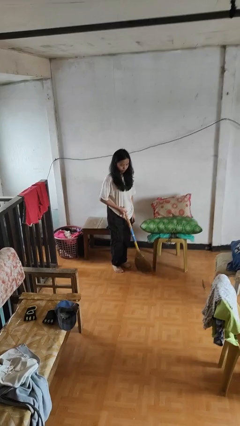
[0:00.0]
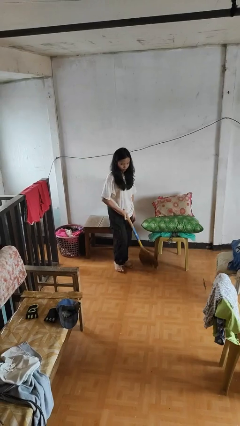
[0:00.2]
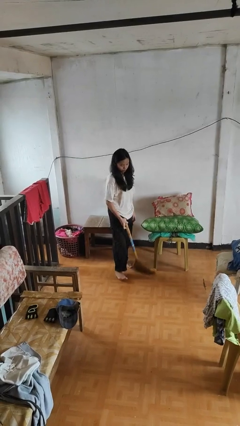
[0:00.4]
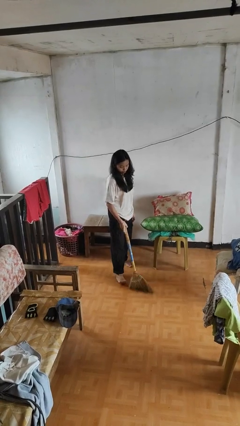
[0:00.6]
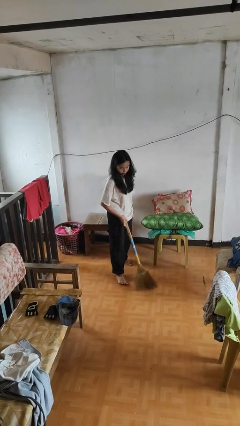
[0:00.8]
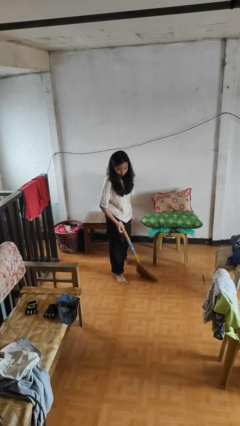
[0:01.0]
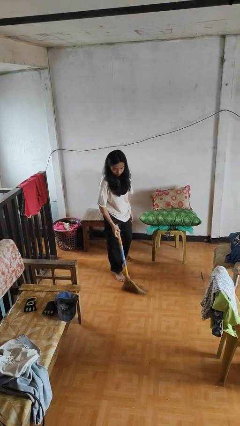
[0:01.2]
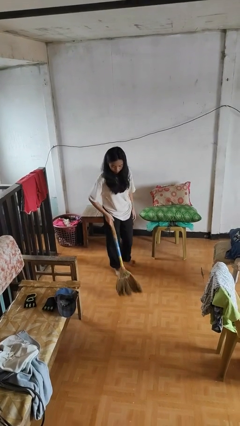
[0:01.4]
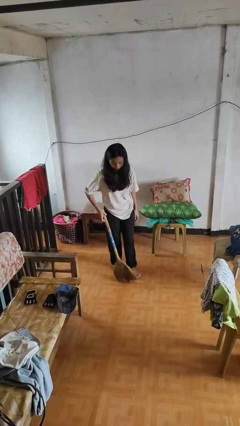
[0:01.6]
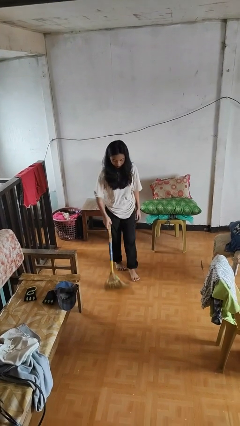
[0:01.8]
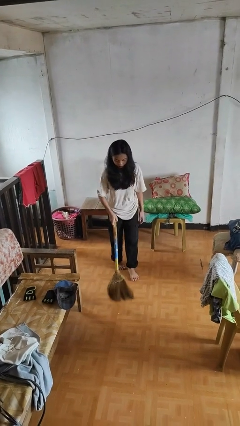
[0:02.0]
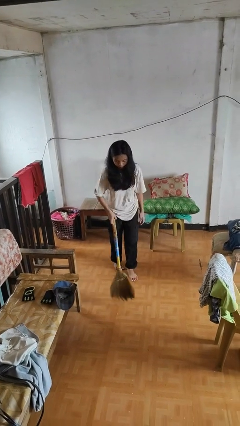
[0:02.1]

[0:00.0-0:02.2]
person sweeps floor

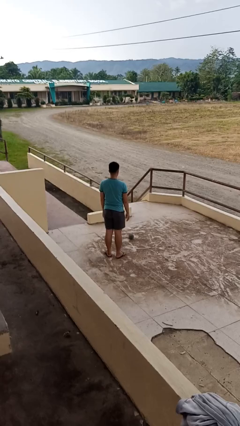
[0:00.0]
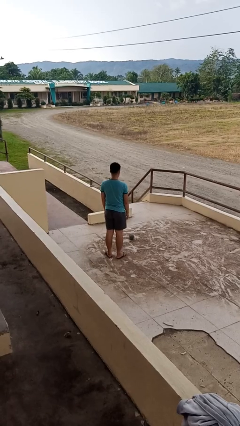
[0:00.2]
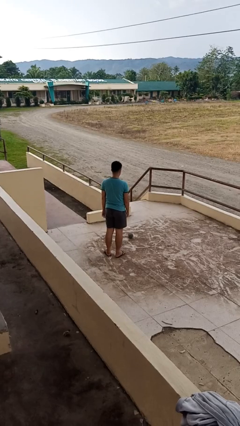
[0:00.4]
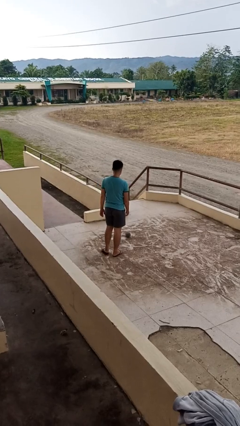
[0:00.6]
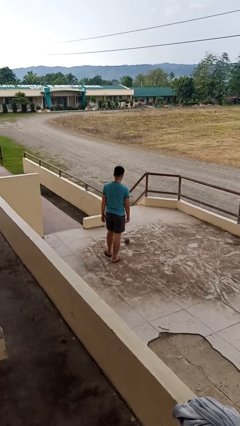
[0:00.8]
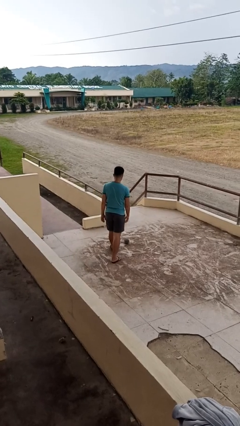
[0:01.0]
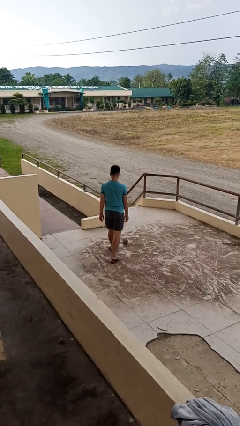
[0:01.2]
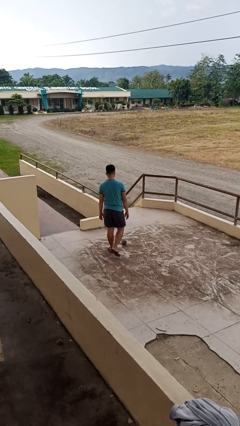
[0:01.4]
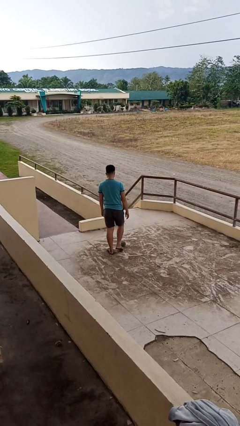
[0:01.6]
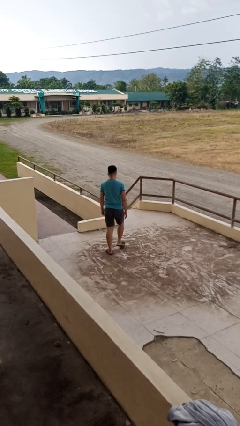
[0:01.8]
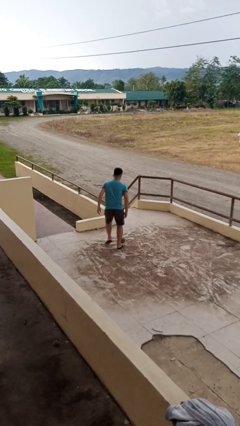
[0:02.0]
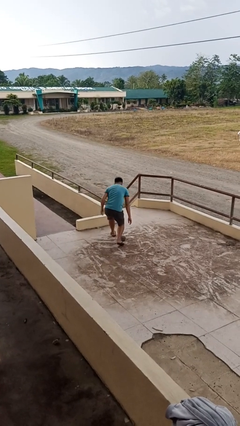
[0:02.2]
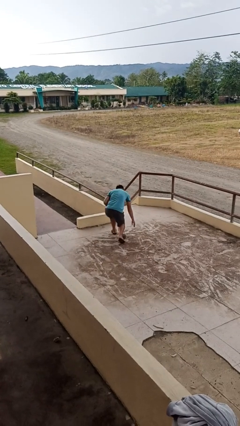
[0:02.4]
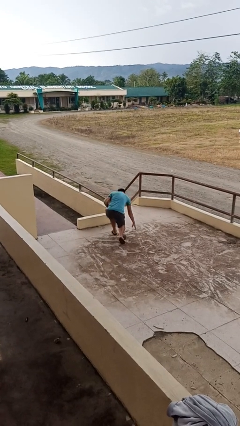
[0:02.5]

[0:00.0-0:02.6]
person trips on object on floor

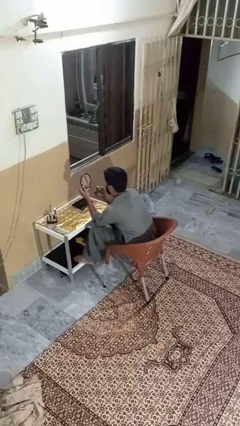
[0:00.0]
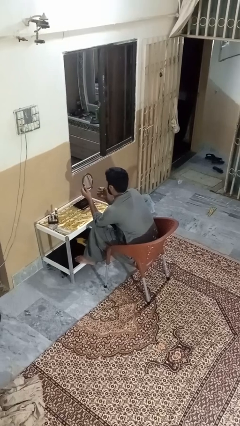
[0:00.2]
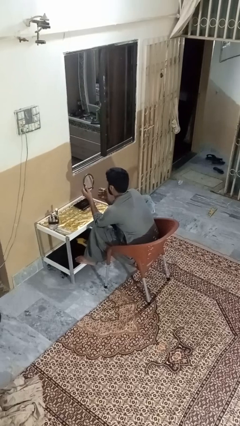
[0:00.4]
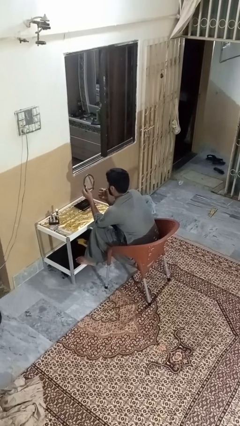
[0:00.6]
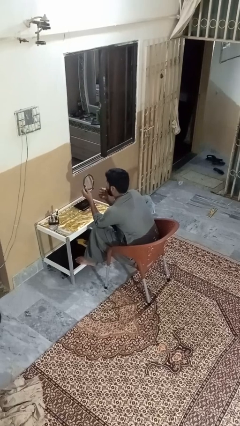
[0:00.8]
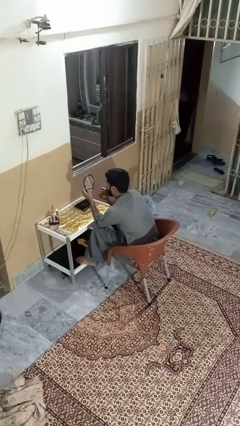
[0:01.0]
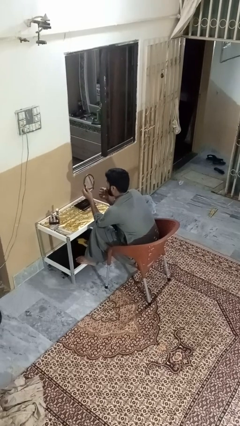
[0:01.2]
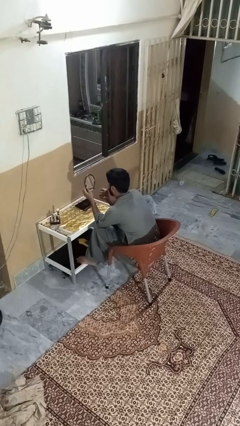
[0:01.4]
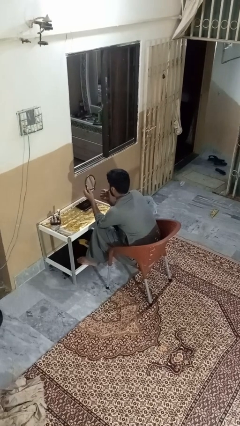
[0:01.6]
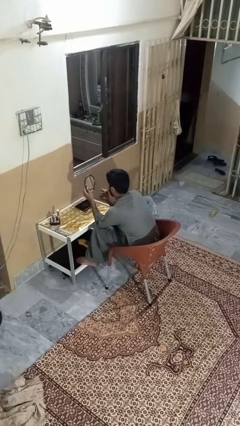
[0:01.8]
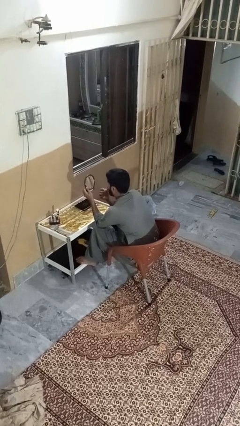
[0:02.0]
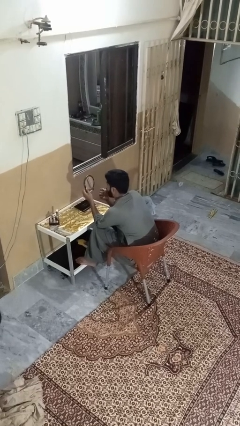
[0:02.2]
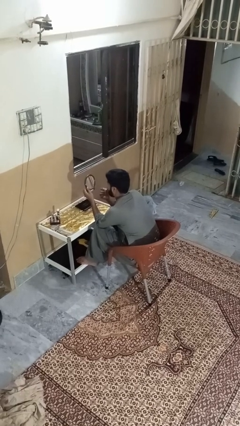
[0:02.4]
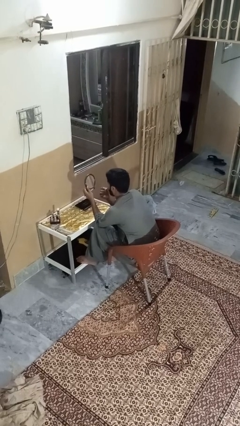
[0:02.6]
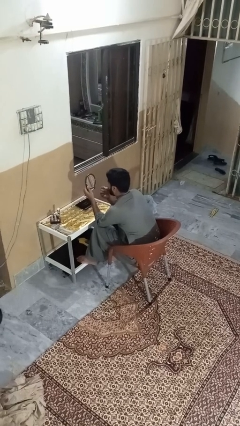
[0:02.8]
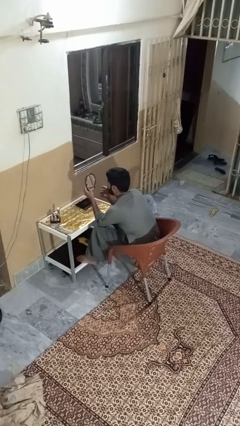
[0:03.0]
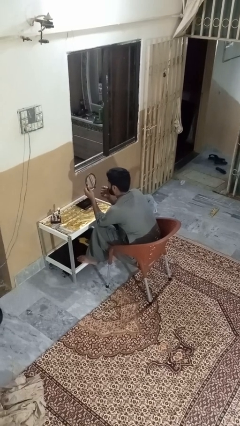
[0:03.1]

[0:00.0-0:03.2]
person applies lip makeup

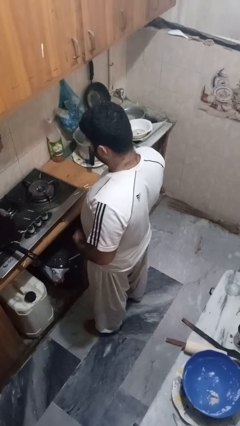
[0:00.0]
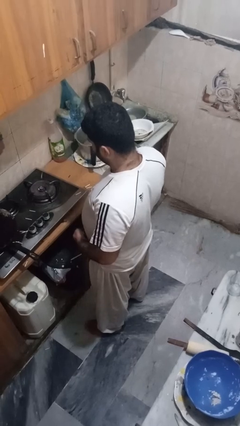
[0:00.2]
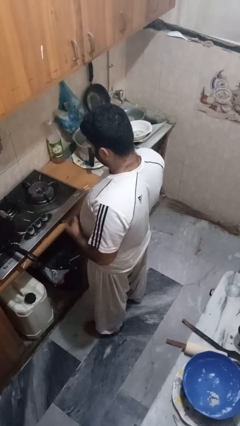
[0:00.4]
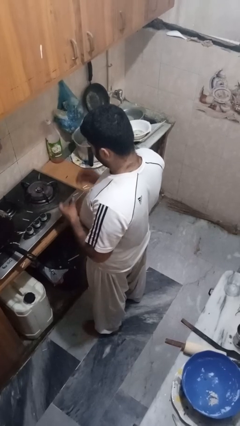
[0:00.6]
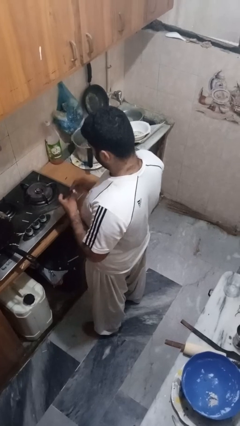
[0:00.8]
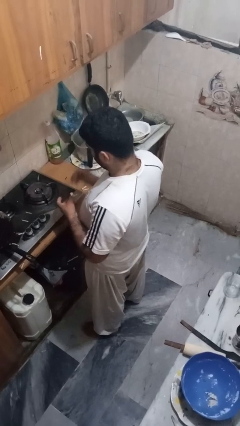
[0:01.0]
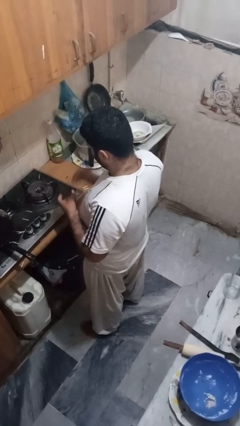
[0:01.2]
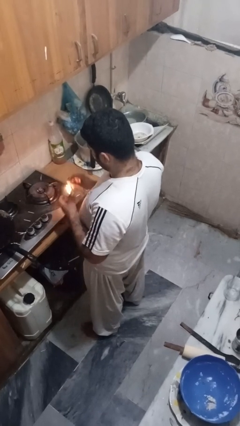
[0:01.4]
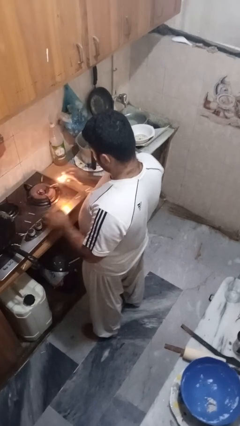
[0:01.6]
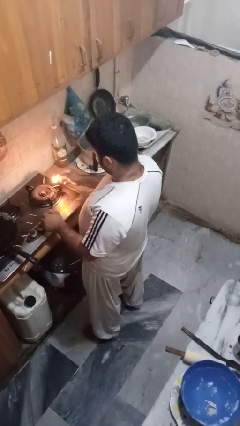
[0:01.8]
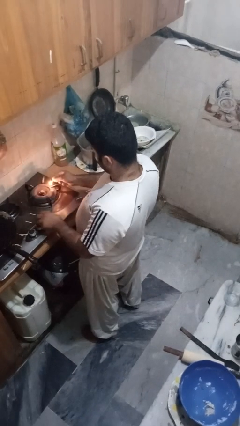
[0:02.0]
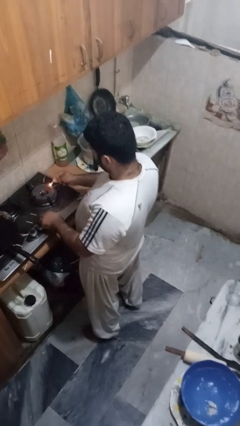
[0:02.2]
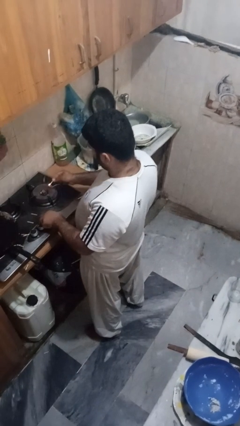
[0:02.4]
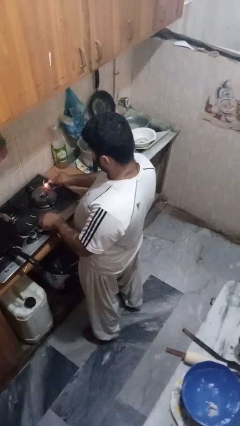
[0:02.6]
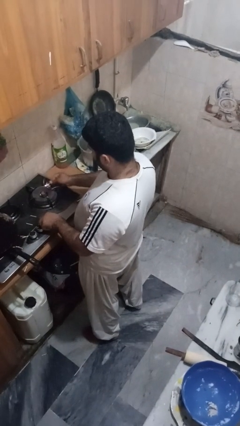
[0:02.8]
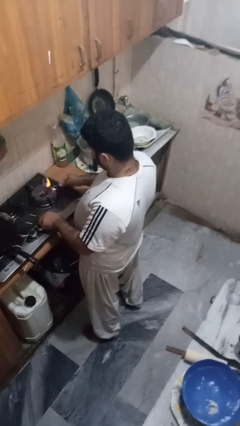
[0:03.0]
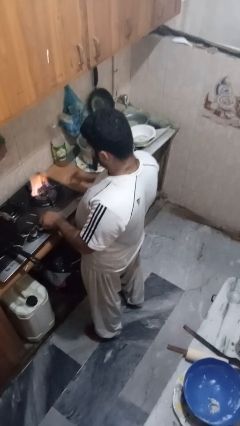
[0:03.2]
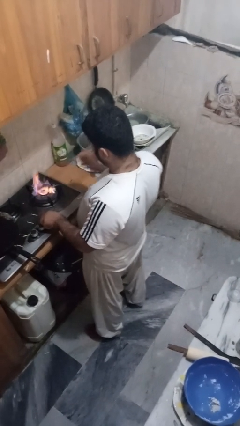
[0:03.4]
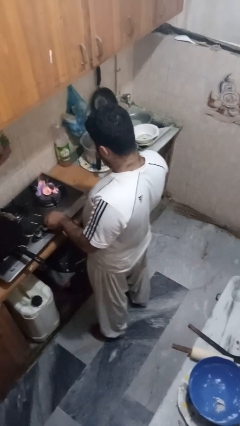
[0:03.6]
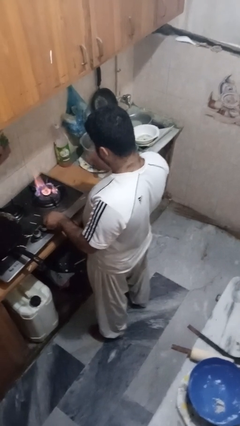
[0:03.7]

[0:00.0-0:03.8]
person turns on stovetop

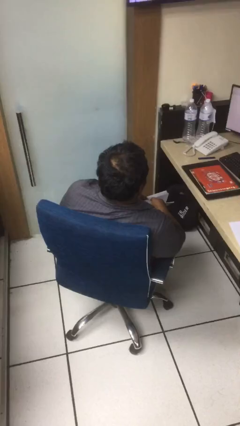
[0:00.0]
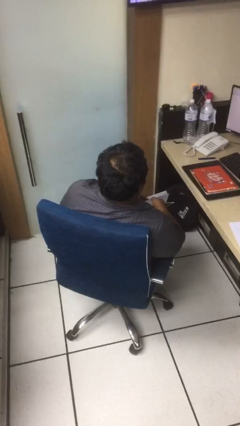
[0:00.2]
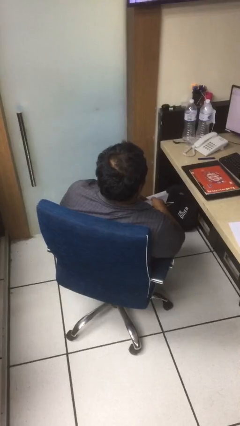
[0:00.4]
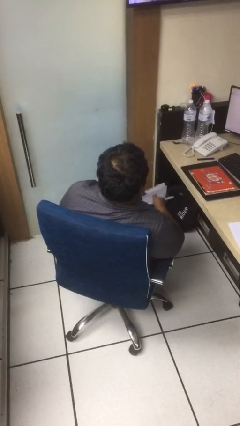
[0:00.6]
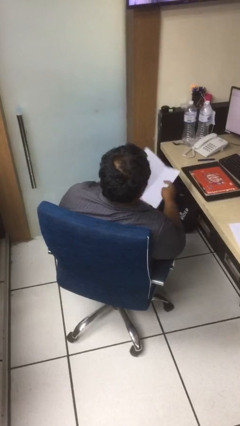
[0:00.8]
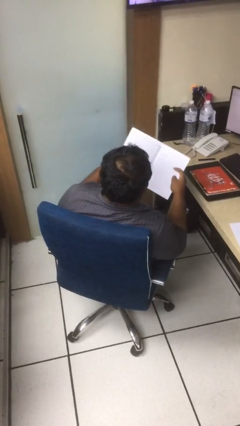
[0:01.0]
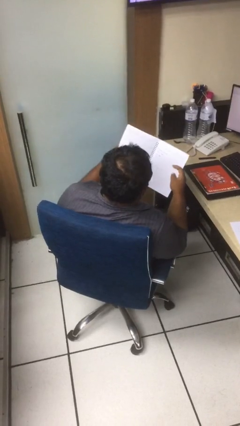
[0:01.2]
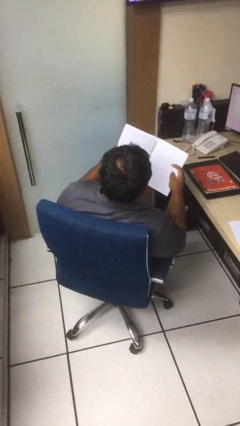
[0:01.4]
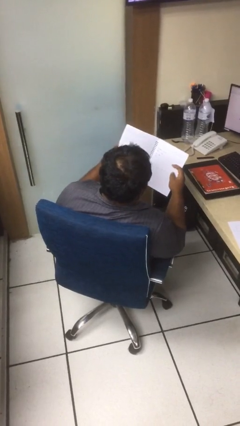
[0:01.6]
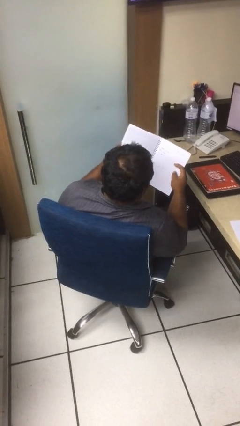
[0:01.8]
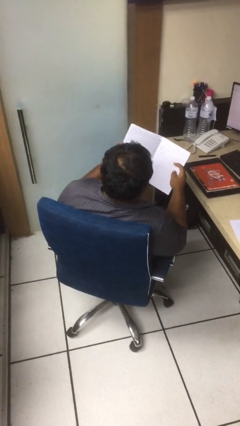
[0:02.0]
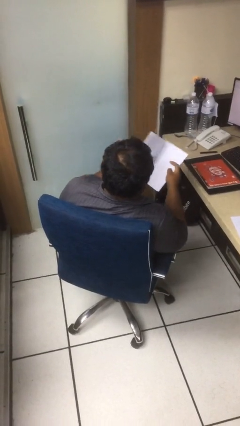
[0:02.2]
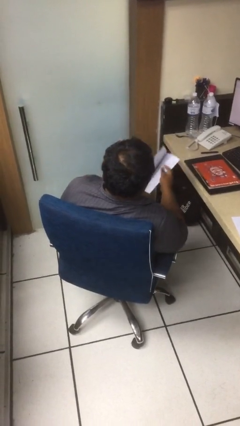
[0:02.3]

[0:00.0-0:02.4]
person reads book

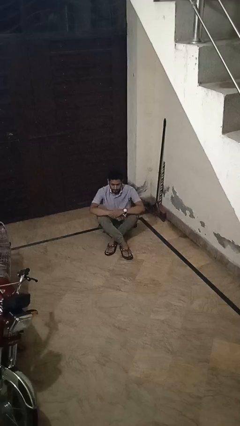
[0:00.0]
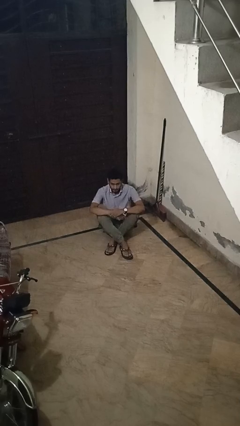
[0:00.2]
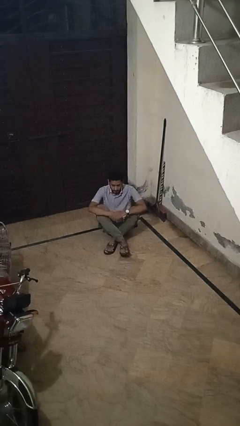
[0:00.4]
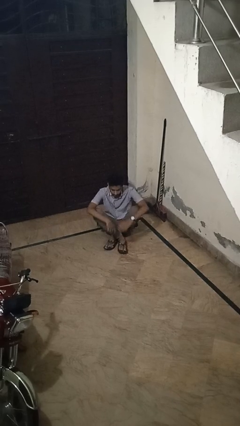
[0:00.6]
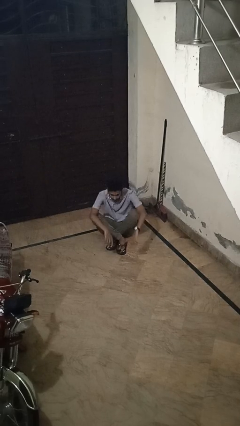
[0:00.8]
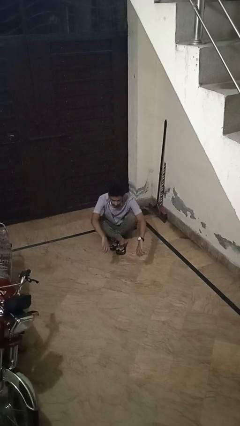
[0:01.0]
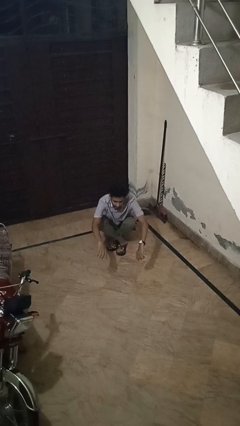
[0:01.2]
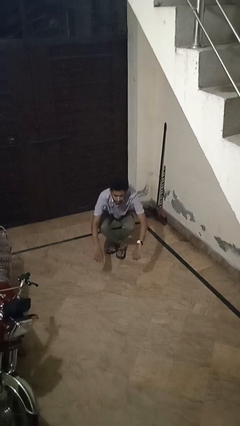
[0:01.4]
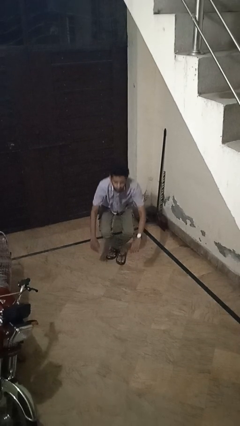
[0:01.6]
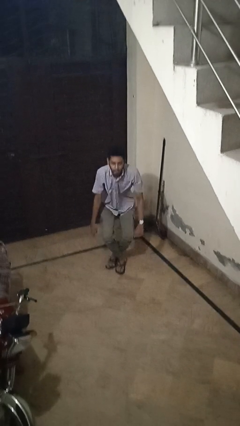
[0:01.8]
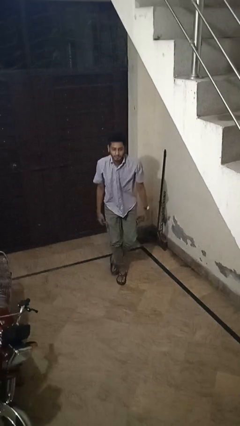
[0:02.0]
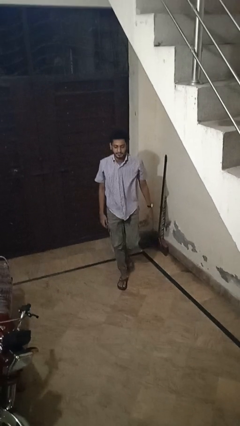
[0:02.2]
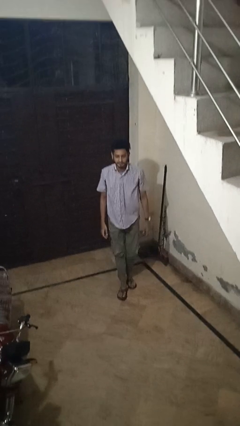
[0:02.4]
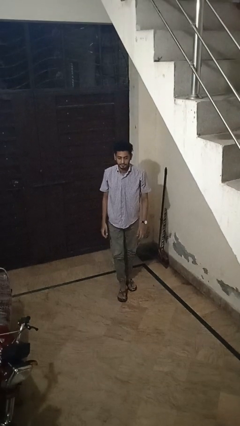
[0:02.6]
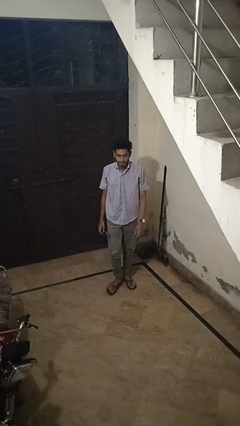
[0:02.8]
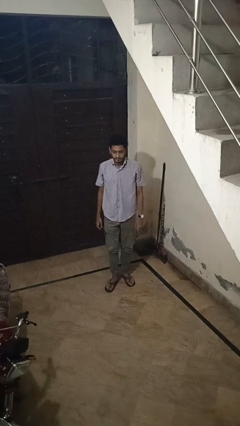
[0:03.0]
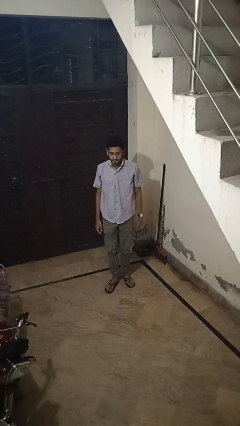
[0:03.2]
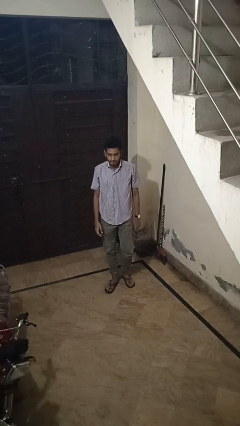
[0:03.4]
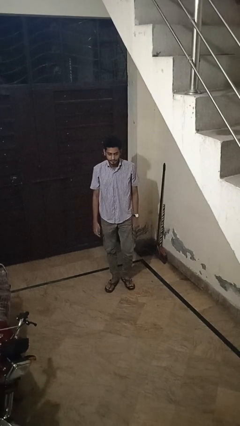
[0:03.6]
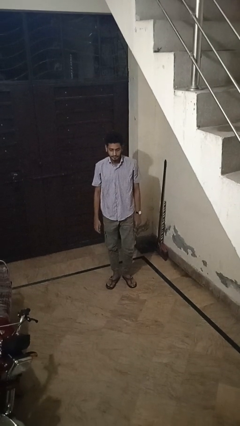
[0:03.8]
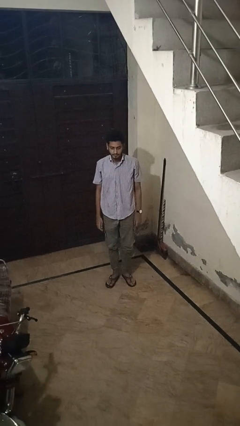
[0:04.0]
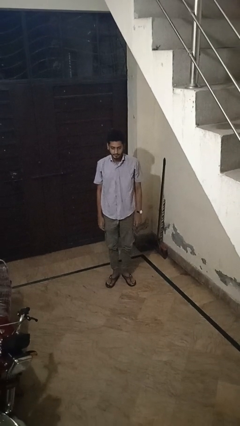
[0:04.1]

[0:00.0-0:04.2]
person stands up from floor
